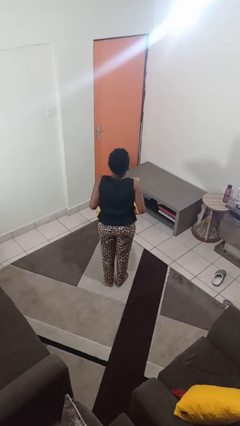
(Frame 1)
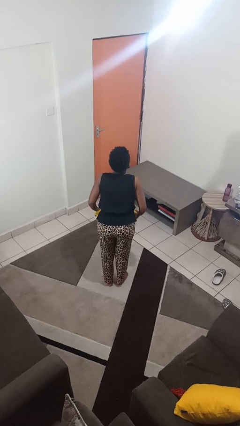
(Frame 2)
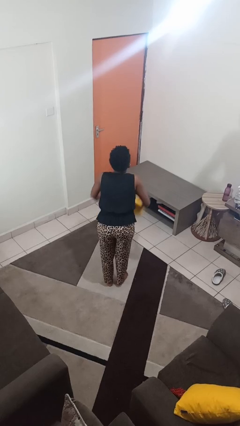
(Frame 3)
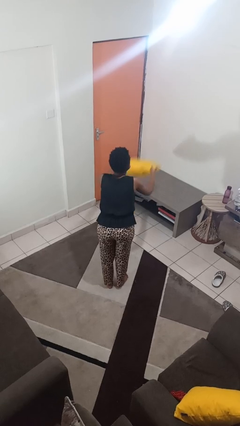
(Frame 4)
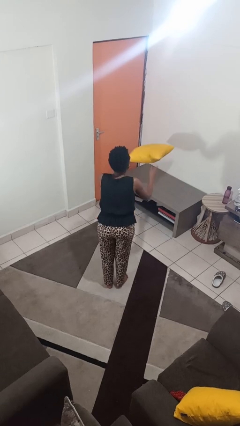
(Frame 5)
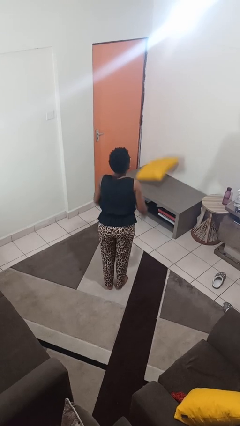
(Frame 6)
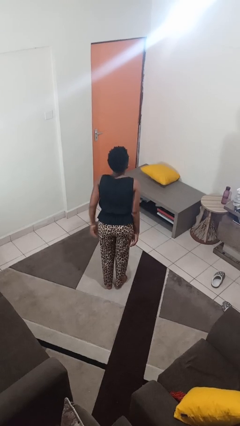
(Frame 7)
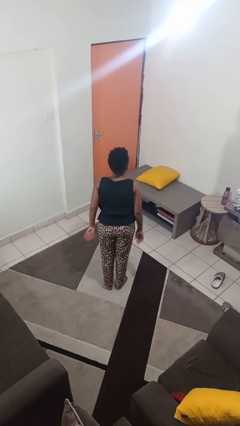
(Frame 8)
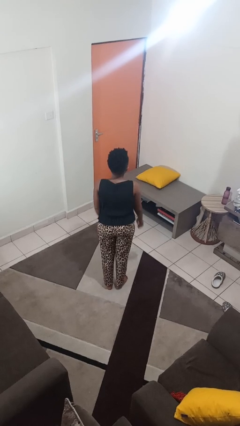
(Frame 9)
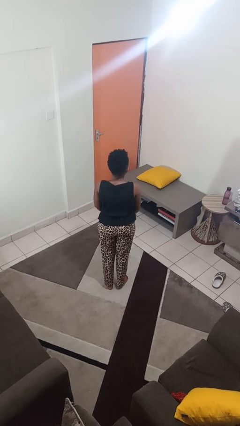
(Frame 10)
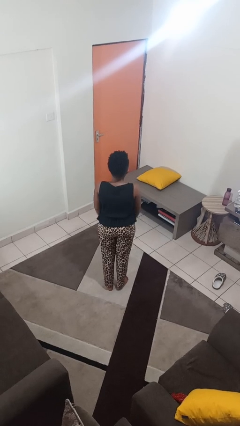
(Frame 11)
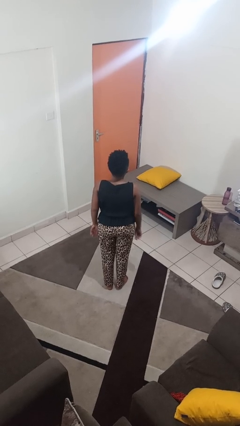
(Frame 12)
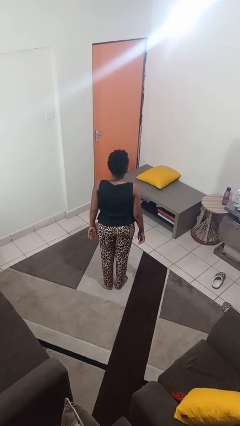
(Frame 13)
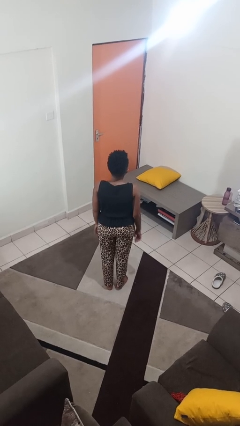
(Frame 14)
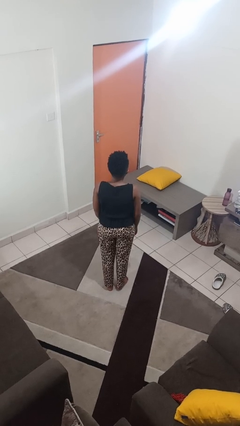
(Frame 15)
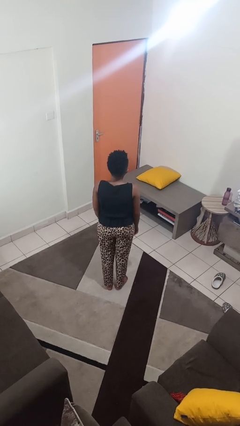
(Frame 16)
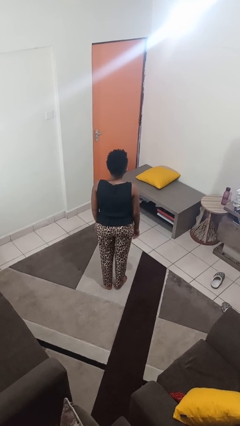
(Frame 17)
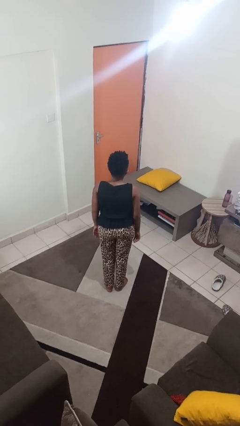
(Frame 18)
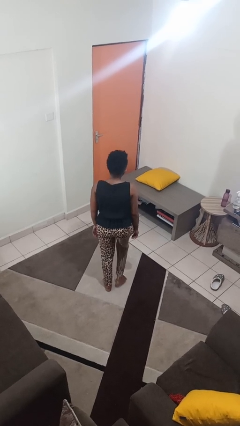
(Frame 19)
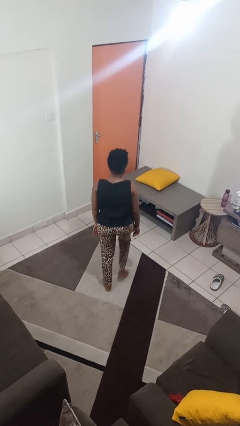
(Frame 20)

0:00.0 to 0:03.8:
person throws object on table

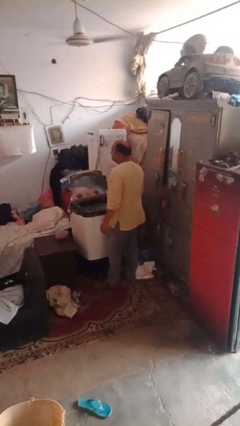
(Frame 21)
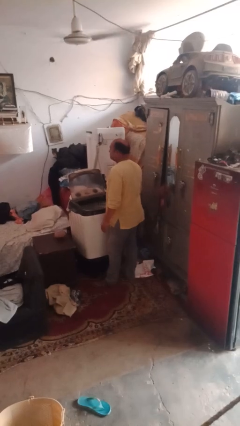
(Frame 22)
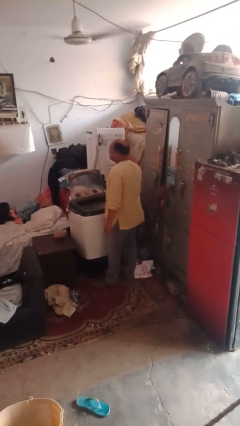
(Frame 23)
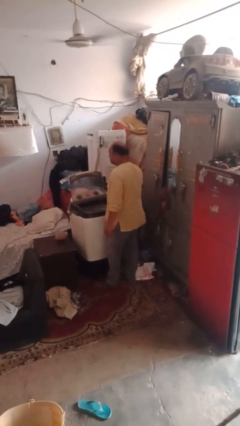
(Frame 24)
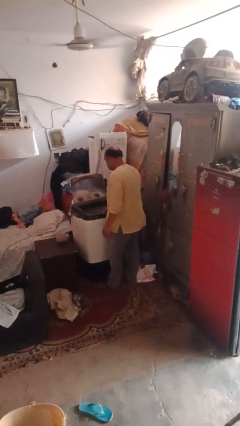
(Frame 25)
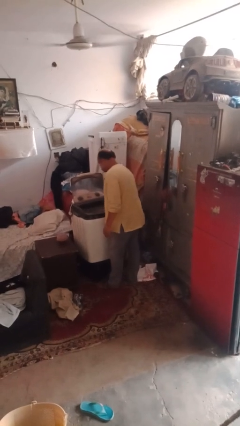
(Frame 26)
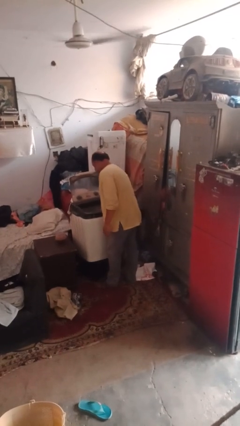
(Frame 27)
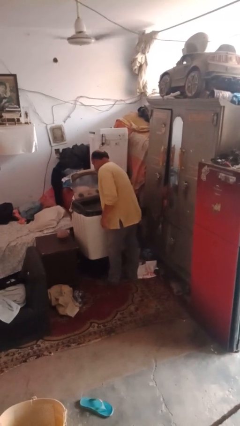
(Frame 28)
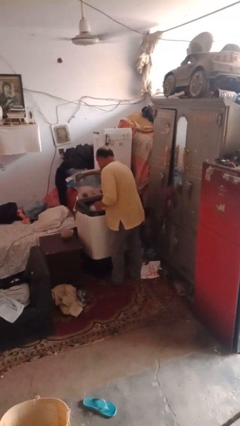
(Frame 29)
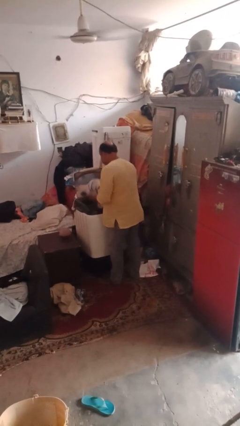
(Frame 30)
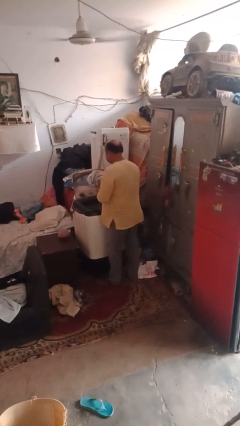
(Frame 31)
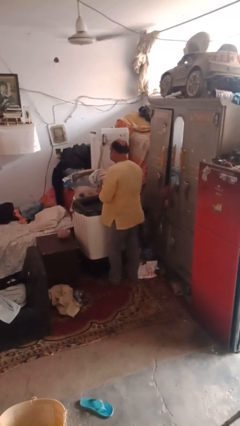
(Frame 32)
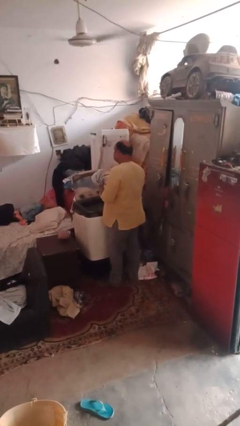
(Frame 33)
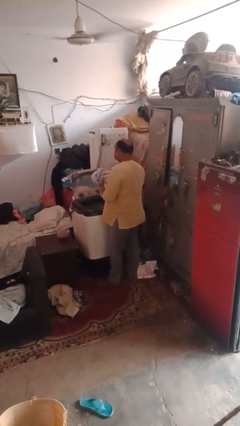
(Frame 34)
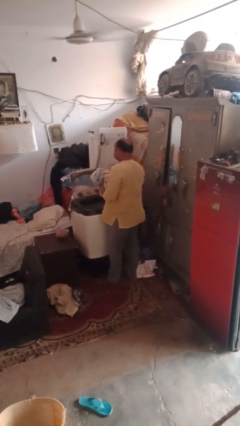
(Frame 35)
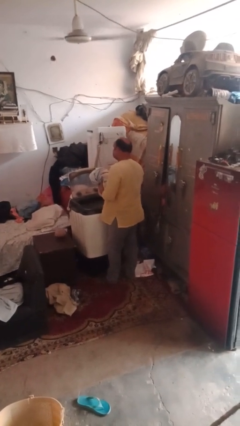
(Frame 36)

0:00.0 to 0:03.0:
person unloads clotheswasher

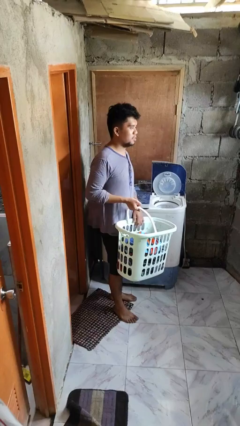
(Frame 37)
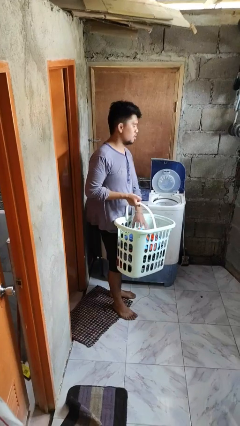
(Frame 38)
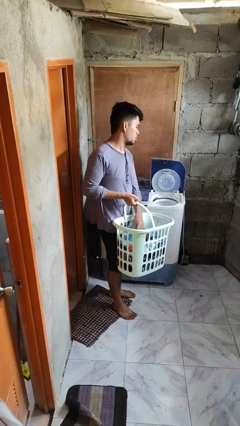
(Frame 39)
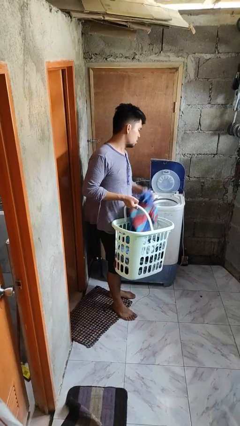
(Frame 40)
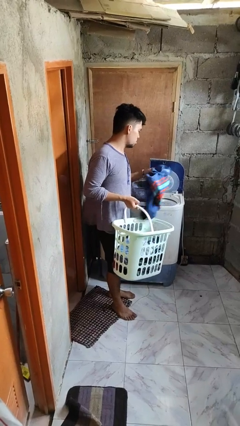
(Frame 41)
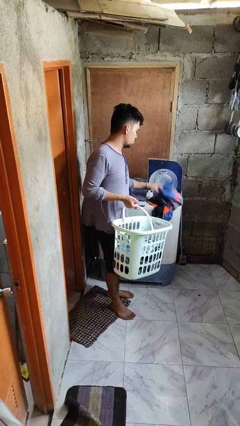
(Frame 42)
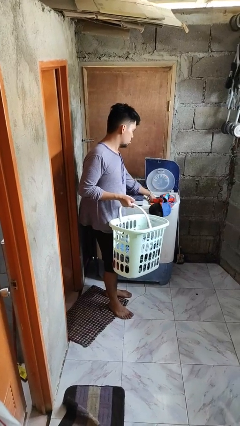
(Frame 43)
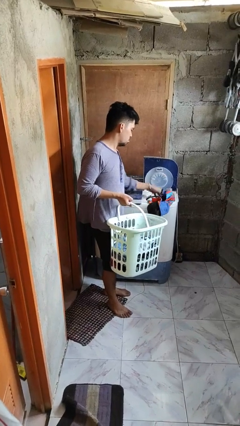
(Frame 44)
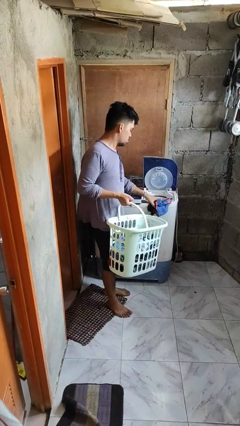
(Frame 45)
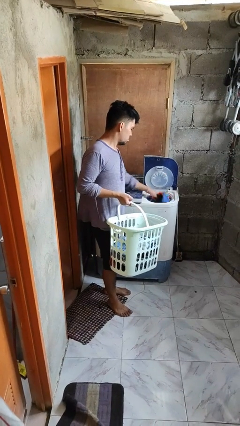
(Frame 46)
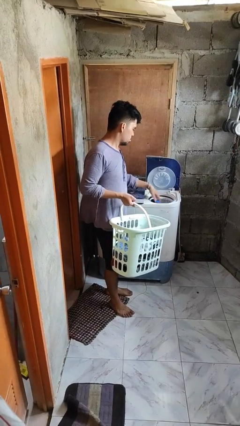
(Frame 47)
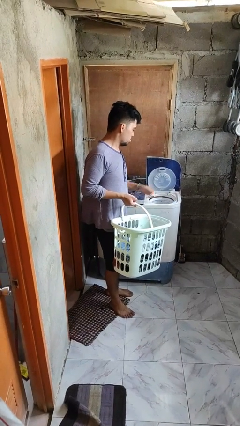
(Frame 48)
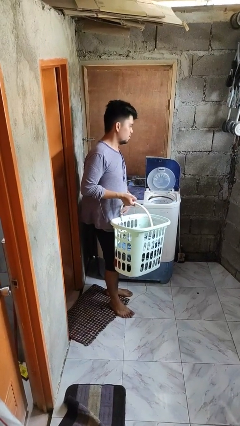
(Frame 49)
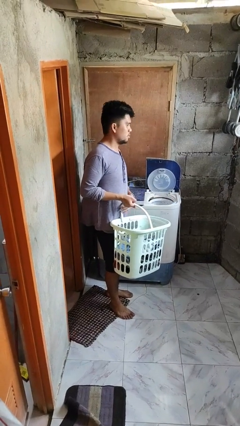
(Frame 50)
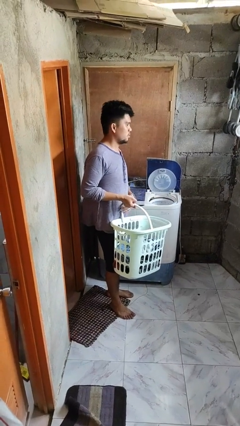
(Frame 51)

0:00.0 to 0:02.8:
person loads dryer

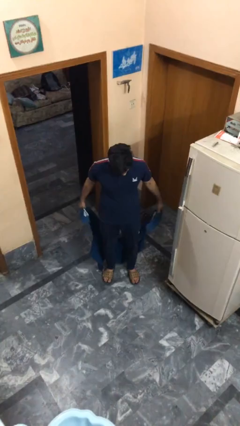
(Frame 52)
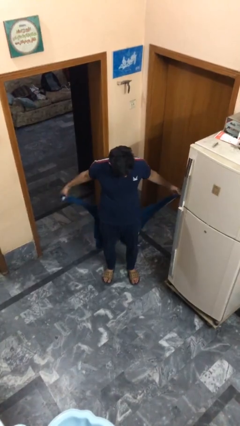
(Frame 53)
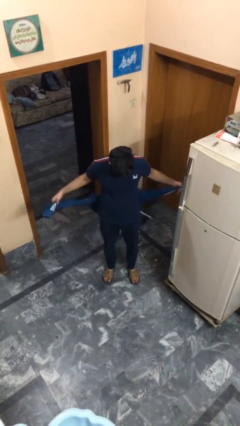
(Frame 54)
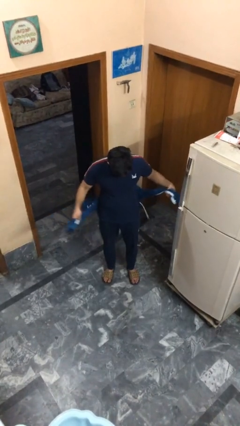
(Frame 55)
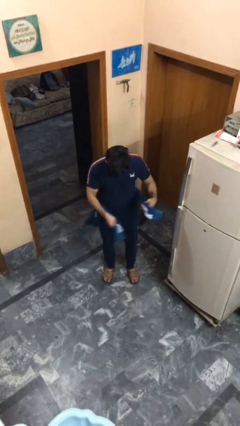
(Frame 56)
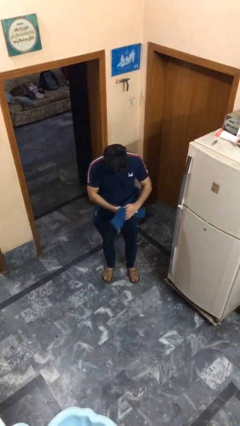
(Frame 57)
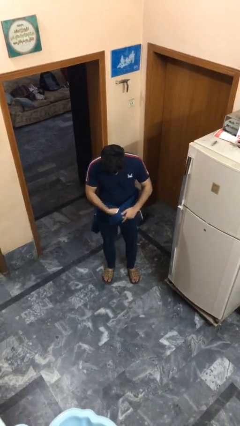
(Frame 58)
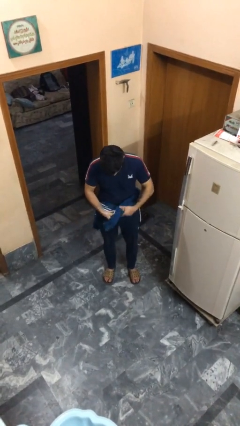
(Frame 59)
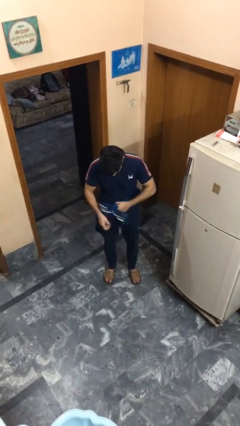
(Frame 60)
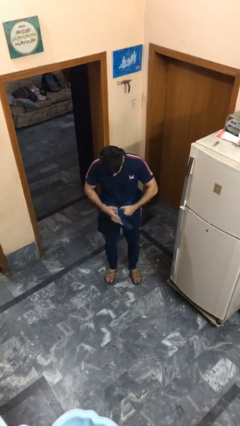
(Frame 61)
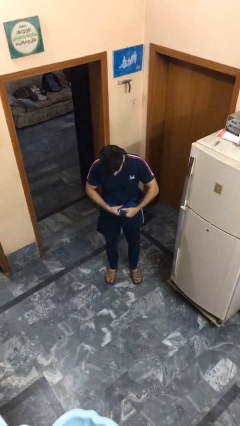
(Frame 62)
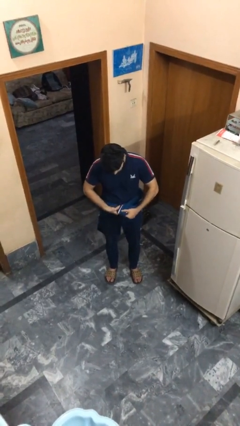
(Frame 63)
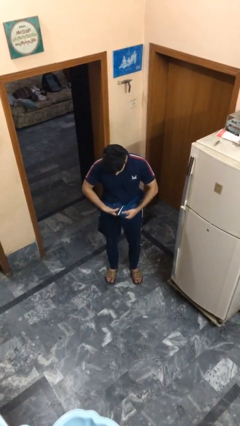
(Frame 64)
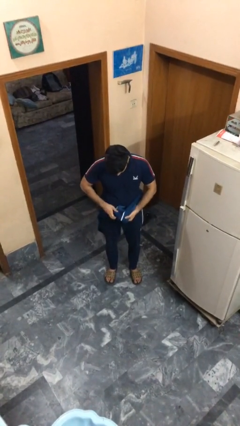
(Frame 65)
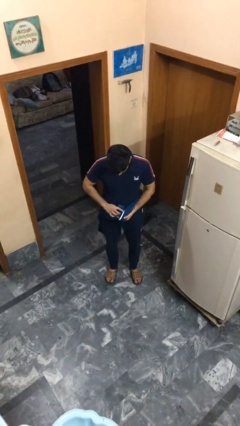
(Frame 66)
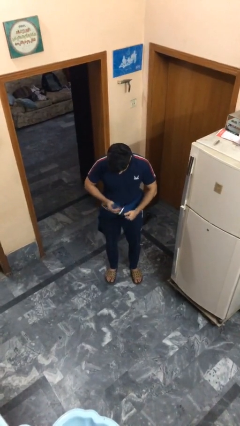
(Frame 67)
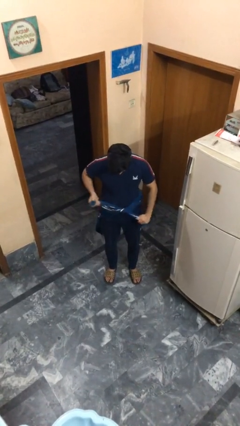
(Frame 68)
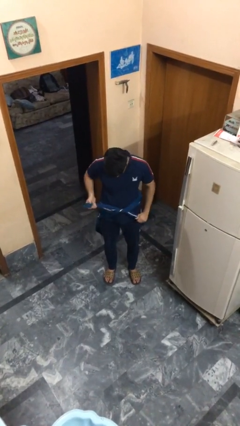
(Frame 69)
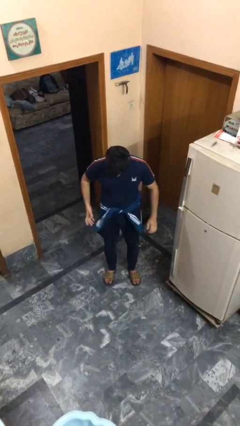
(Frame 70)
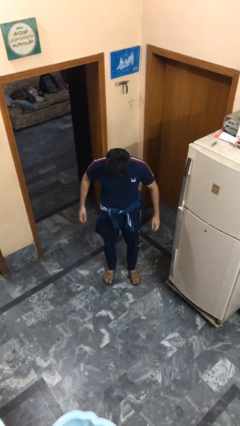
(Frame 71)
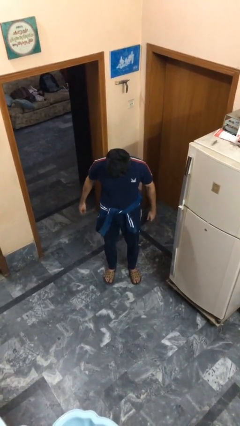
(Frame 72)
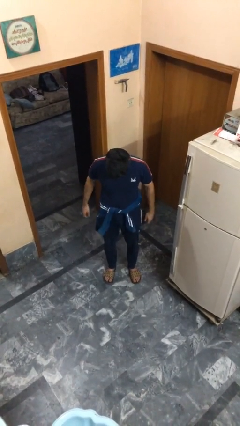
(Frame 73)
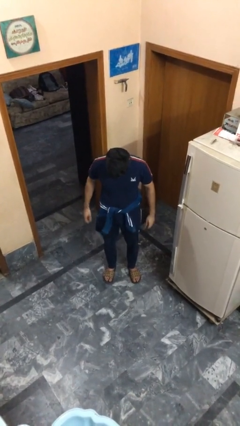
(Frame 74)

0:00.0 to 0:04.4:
person ties jacket around waist

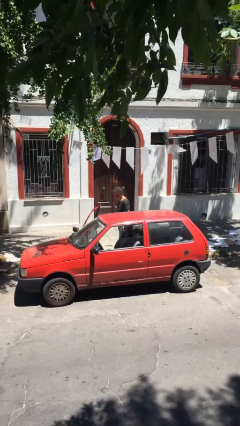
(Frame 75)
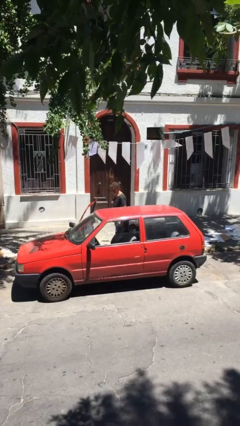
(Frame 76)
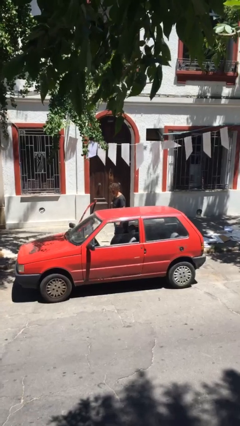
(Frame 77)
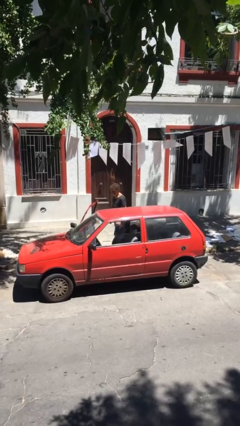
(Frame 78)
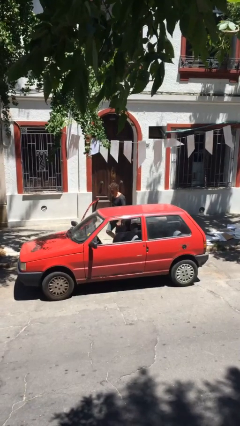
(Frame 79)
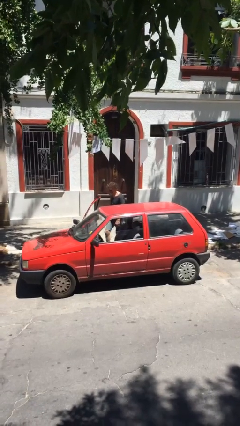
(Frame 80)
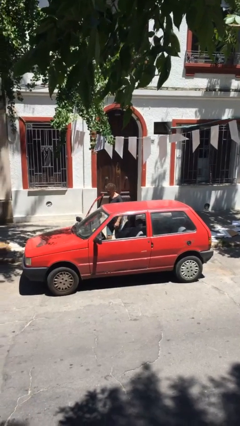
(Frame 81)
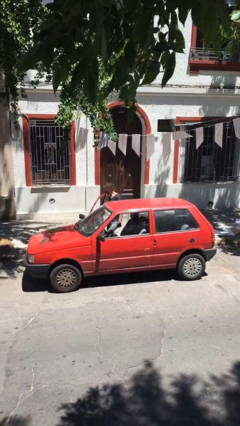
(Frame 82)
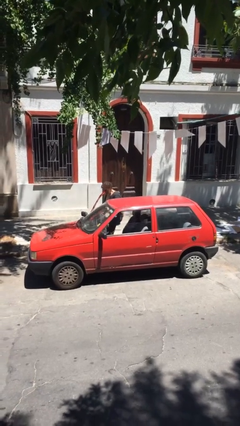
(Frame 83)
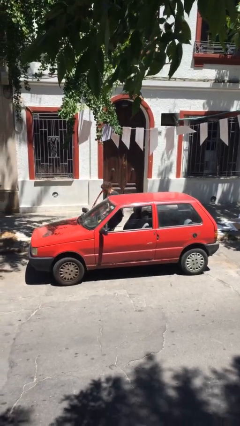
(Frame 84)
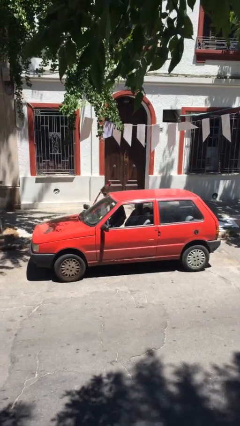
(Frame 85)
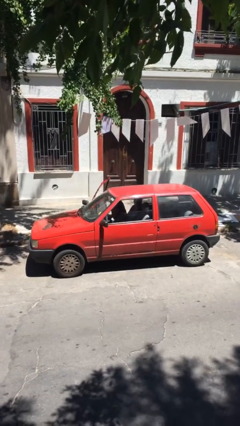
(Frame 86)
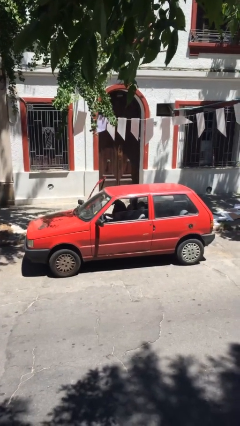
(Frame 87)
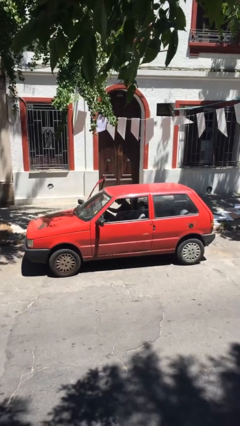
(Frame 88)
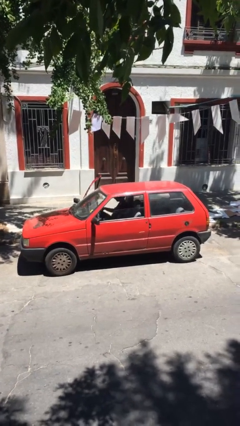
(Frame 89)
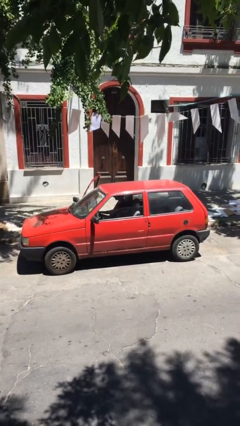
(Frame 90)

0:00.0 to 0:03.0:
person enters car

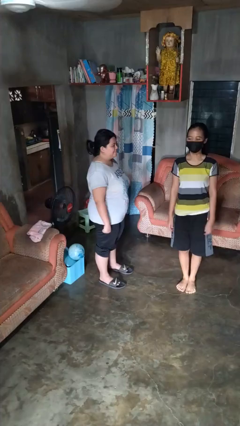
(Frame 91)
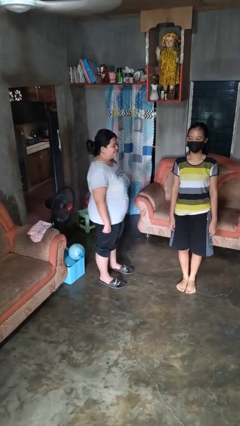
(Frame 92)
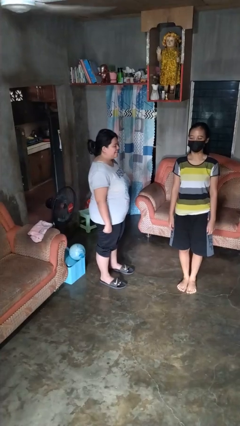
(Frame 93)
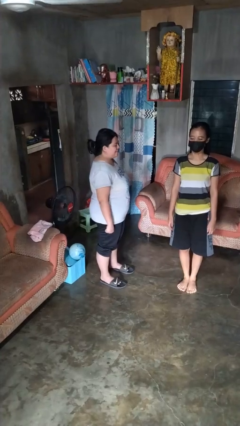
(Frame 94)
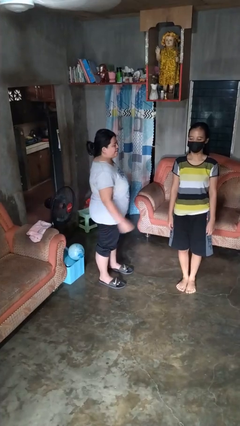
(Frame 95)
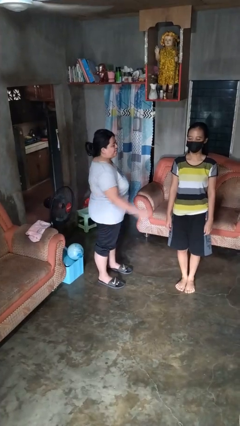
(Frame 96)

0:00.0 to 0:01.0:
person grabs person by forearm
